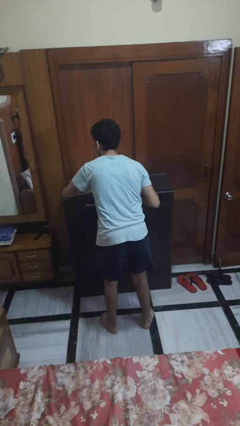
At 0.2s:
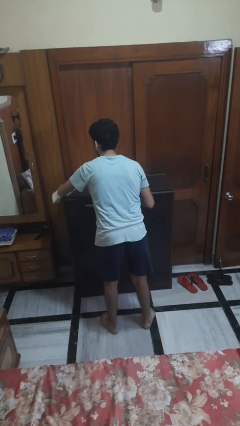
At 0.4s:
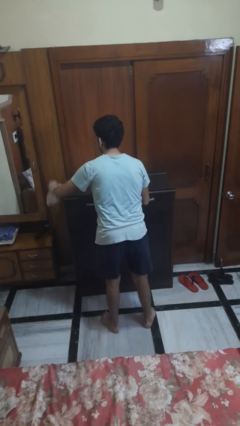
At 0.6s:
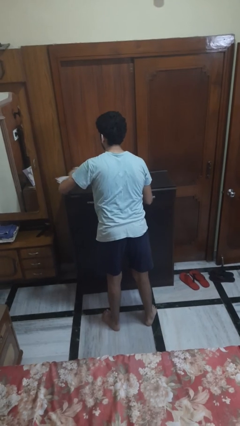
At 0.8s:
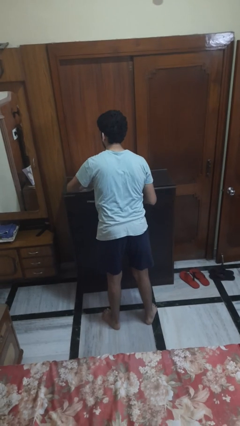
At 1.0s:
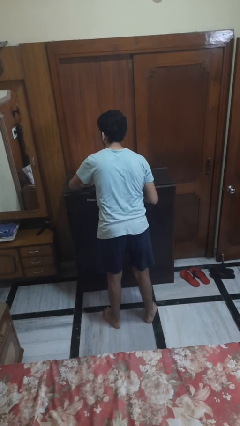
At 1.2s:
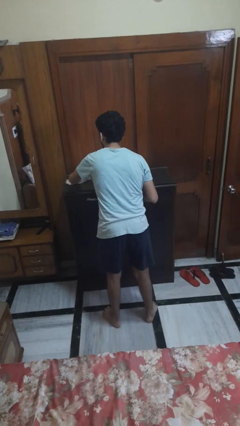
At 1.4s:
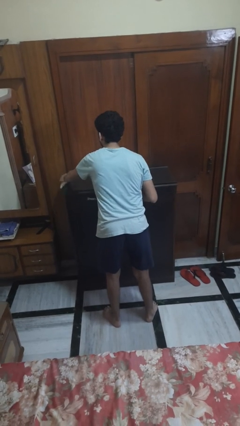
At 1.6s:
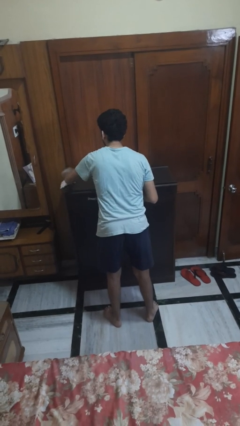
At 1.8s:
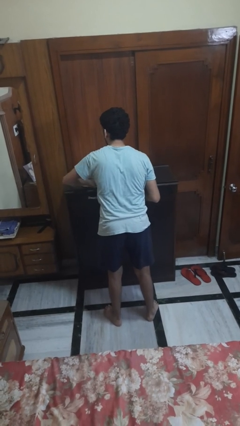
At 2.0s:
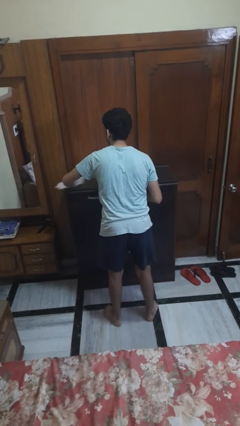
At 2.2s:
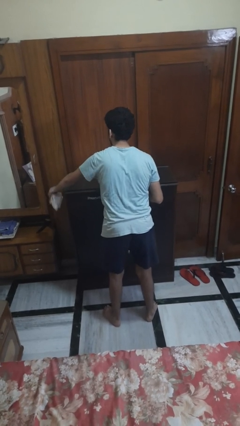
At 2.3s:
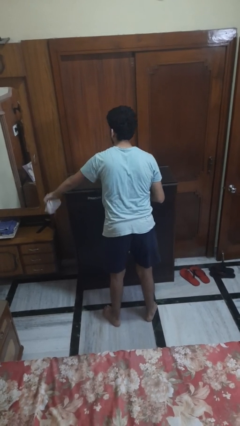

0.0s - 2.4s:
person cleans table with rag

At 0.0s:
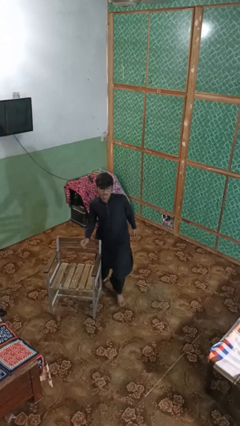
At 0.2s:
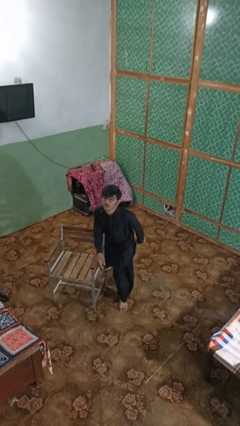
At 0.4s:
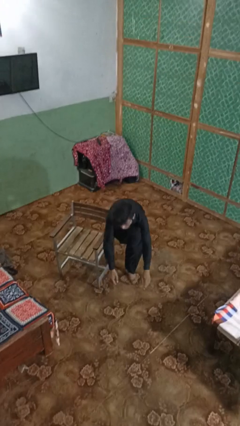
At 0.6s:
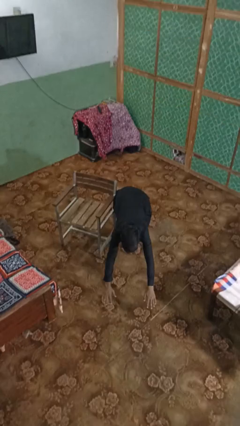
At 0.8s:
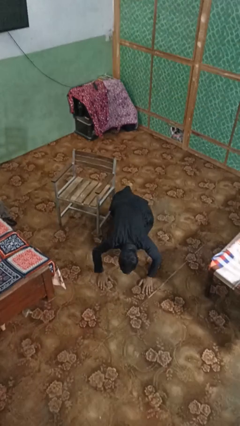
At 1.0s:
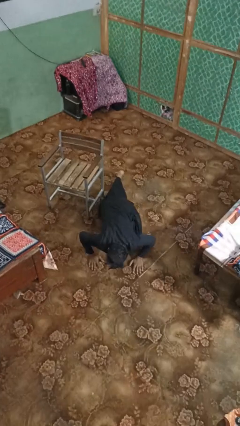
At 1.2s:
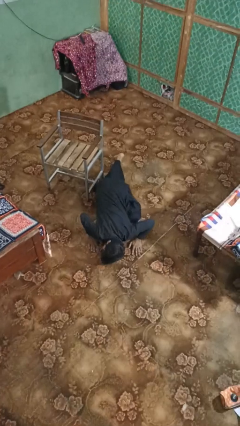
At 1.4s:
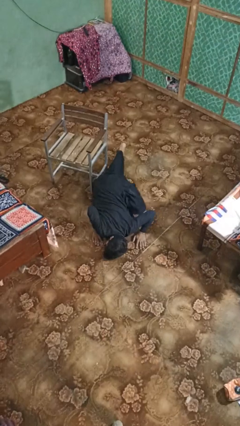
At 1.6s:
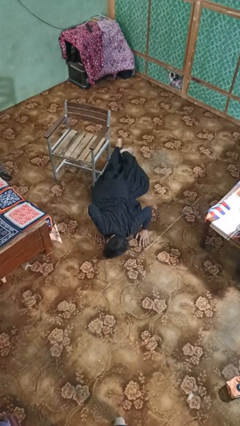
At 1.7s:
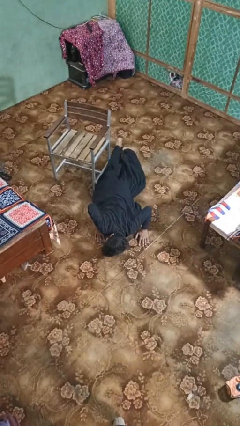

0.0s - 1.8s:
person lies down on floor

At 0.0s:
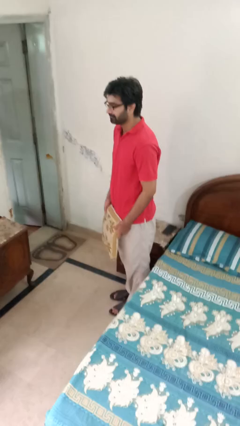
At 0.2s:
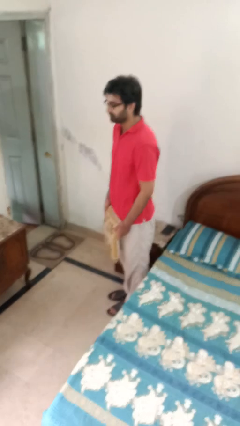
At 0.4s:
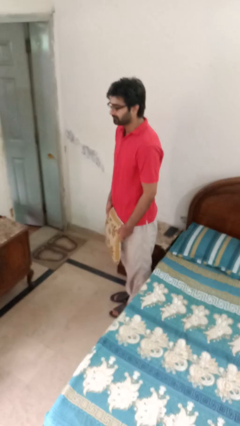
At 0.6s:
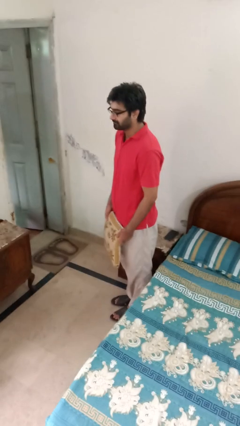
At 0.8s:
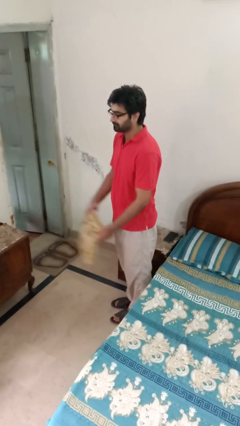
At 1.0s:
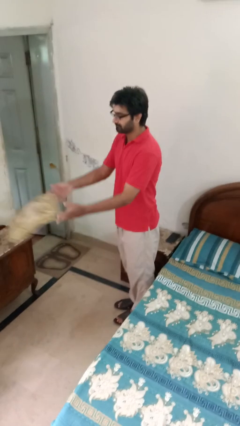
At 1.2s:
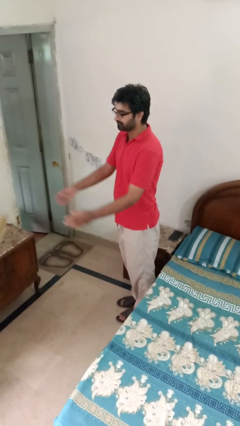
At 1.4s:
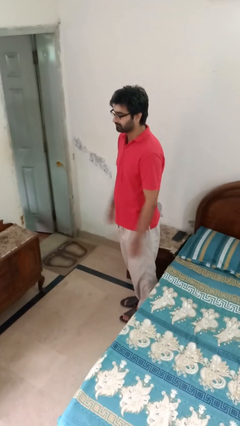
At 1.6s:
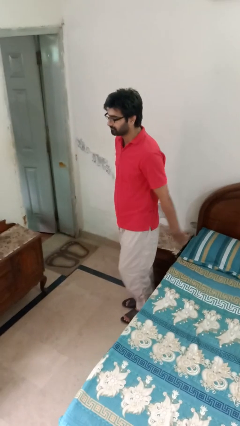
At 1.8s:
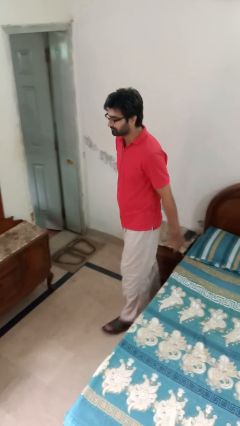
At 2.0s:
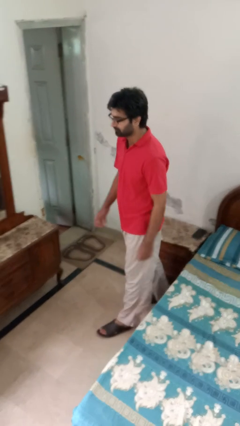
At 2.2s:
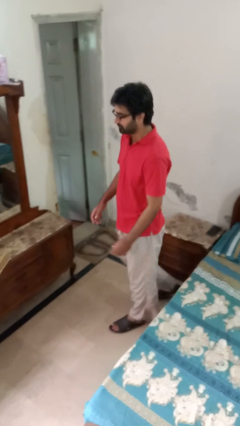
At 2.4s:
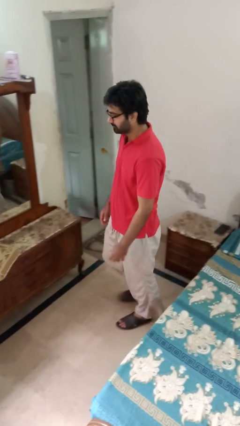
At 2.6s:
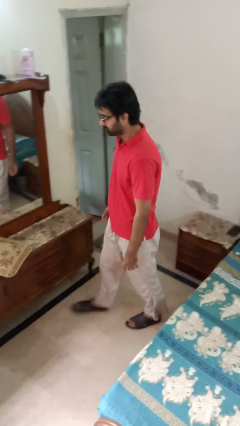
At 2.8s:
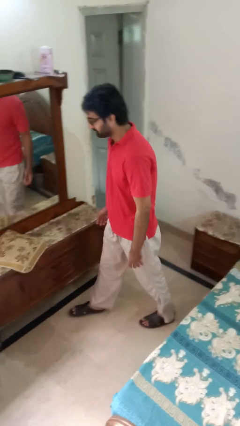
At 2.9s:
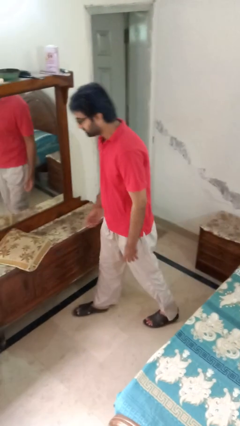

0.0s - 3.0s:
person throws object on table

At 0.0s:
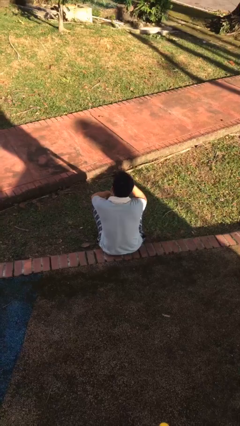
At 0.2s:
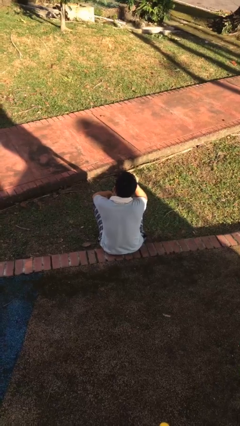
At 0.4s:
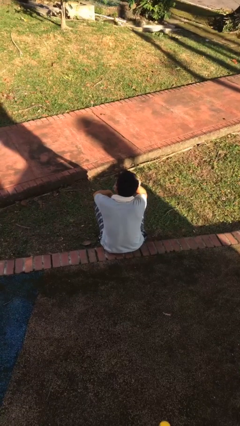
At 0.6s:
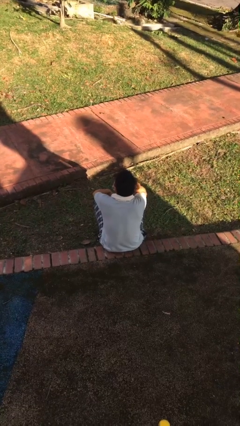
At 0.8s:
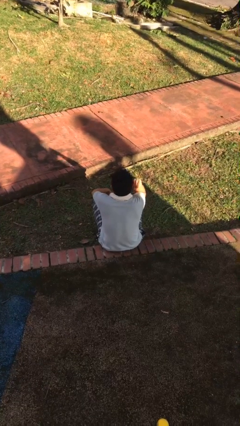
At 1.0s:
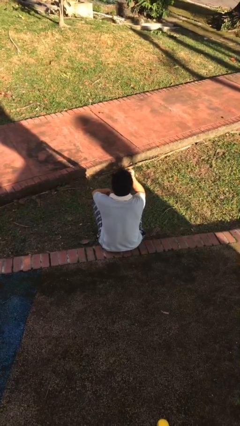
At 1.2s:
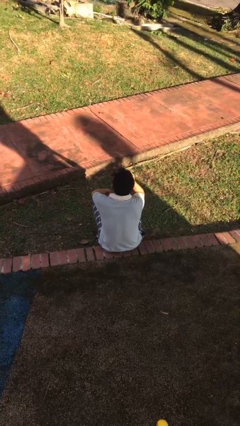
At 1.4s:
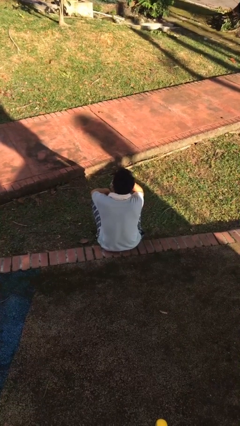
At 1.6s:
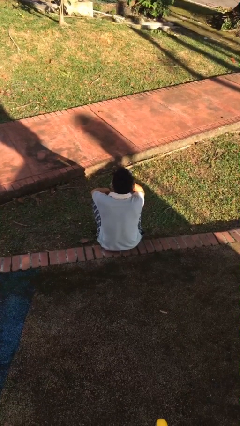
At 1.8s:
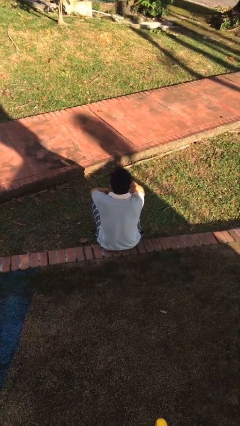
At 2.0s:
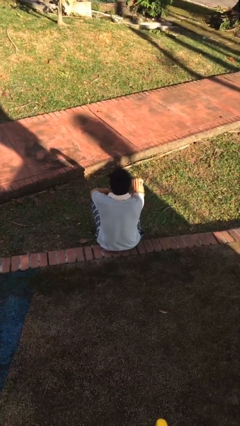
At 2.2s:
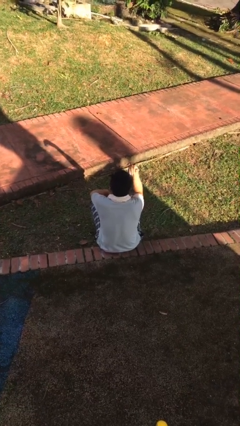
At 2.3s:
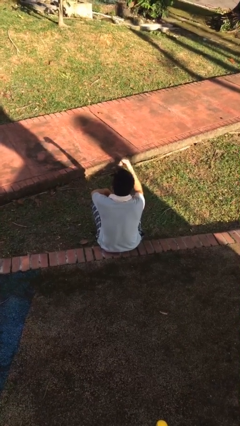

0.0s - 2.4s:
person strokes hair

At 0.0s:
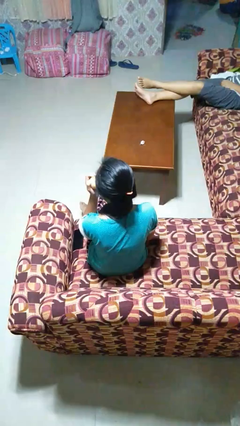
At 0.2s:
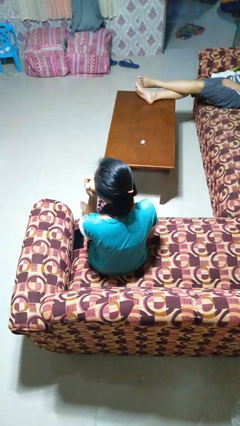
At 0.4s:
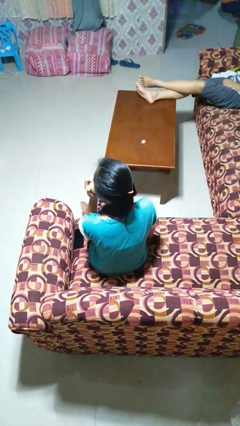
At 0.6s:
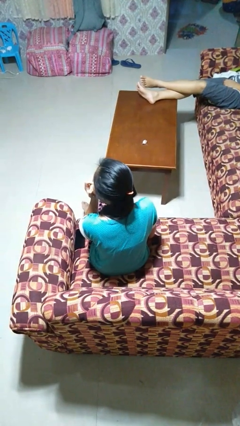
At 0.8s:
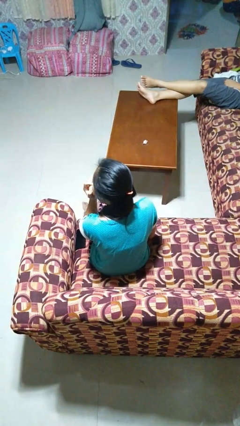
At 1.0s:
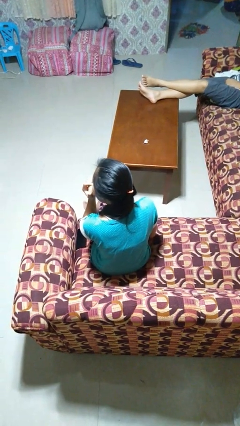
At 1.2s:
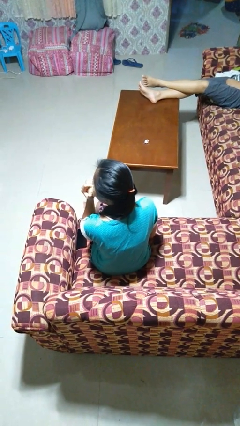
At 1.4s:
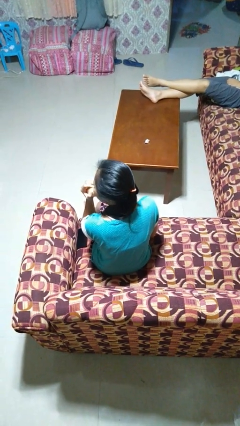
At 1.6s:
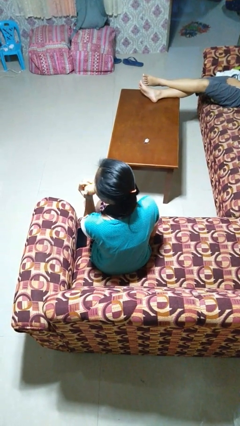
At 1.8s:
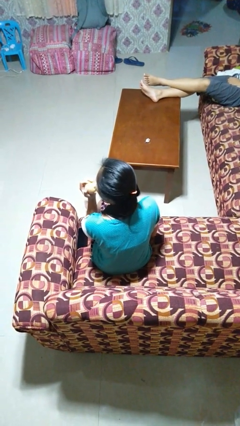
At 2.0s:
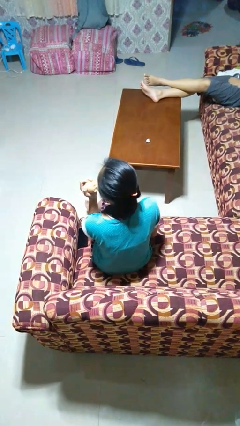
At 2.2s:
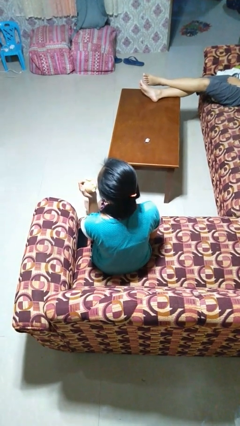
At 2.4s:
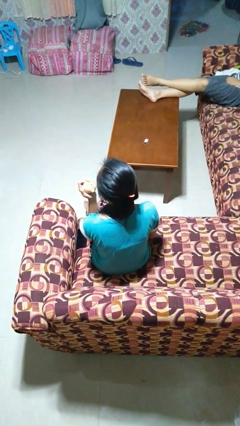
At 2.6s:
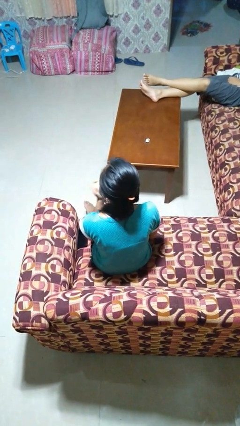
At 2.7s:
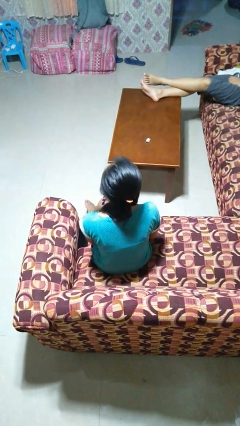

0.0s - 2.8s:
person eats apple

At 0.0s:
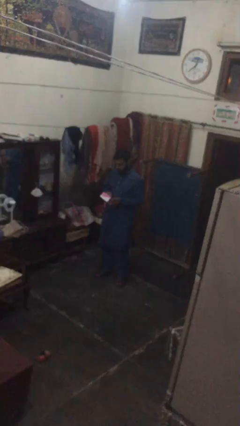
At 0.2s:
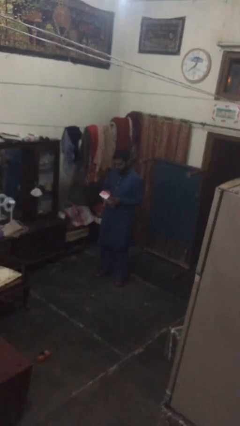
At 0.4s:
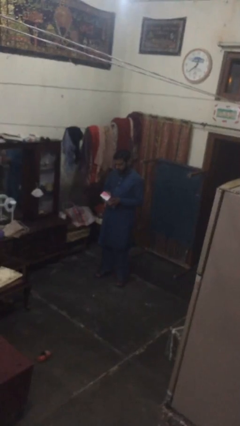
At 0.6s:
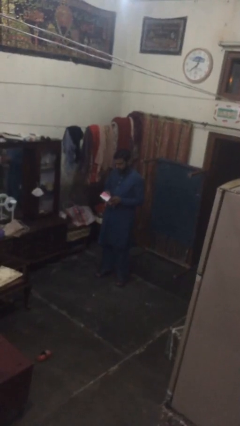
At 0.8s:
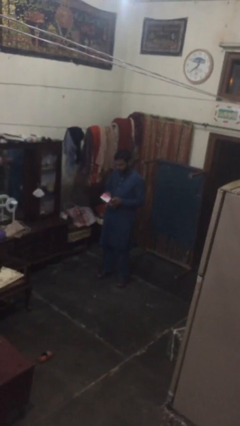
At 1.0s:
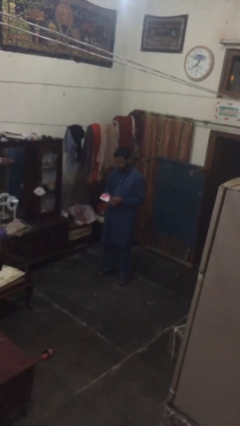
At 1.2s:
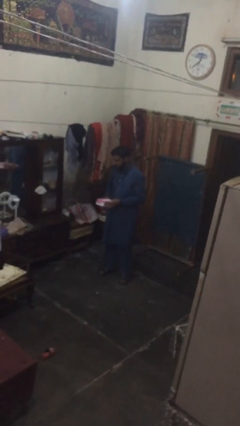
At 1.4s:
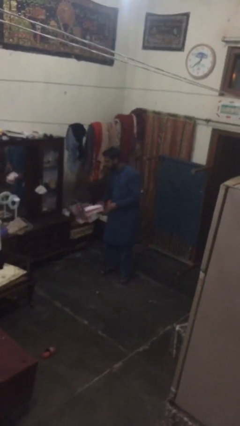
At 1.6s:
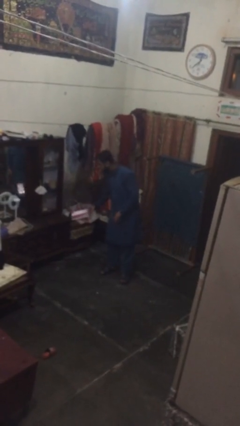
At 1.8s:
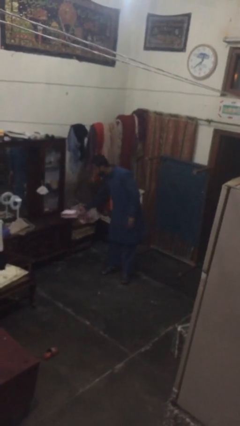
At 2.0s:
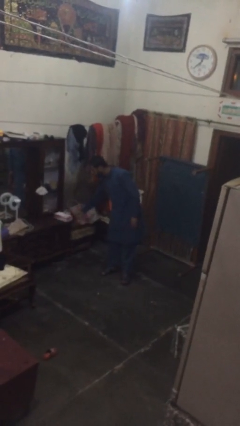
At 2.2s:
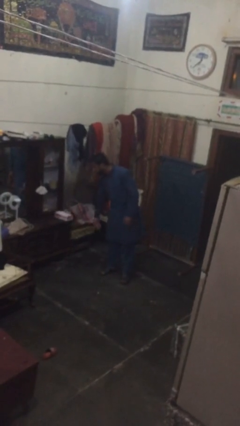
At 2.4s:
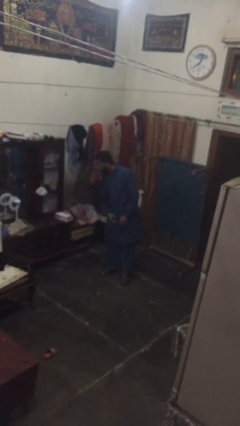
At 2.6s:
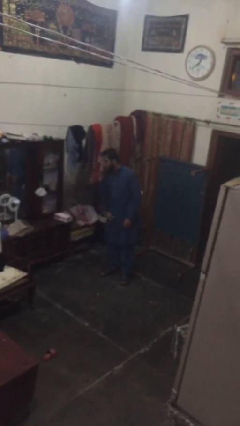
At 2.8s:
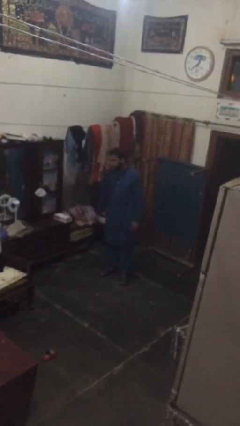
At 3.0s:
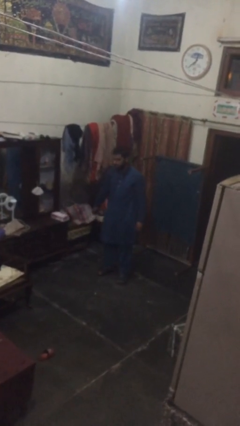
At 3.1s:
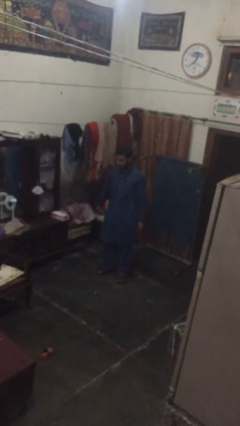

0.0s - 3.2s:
person puts down object on table

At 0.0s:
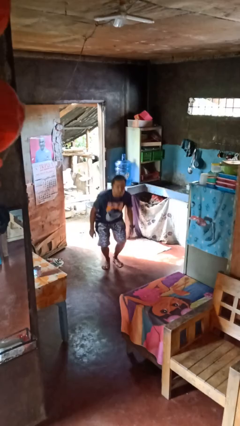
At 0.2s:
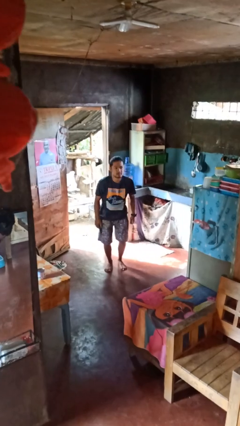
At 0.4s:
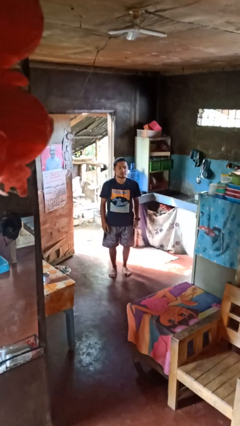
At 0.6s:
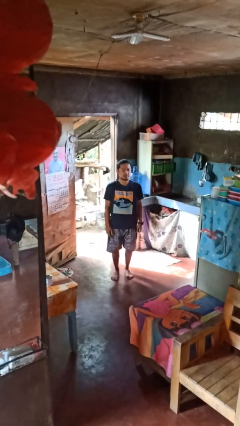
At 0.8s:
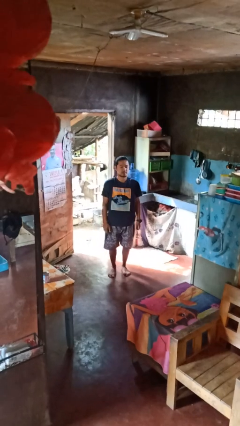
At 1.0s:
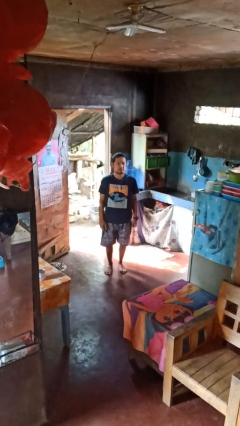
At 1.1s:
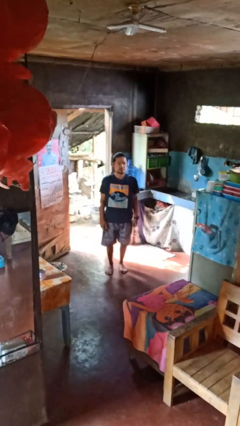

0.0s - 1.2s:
person stands up from floor

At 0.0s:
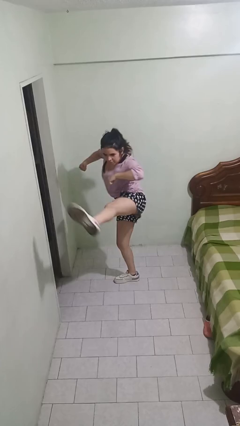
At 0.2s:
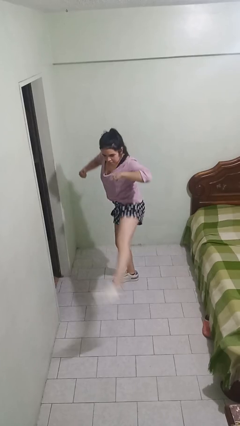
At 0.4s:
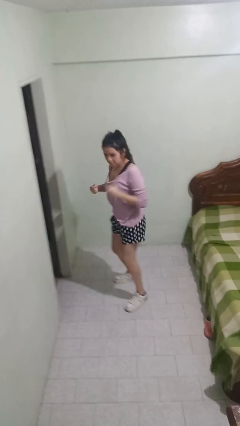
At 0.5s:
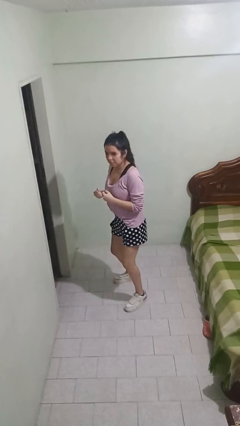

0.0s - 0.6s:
person karate kicks
